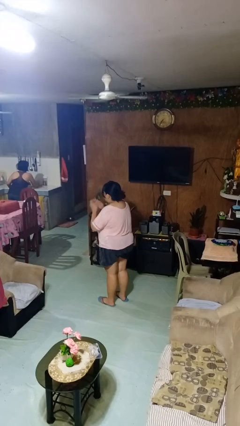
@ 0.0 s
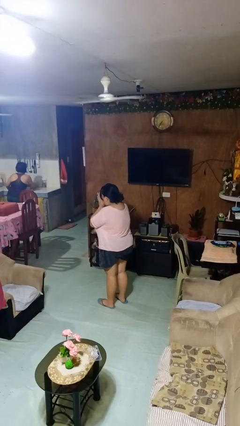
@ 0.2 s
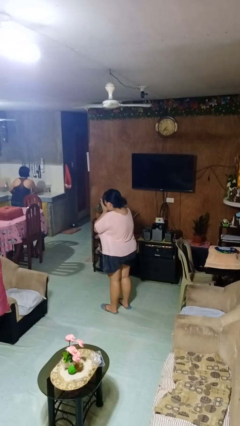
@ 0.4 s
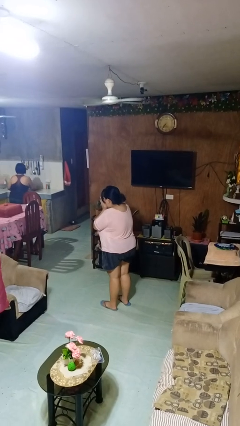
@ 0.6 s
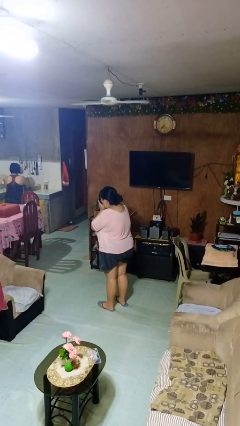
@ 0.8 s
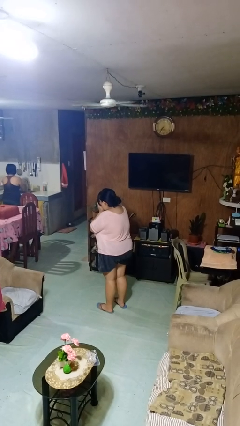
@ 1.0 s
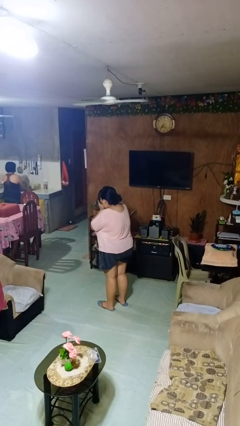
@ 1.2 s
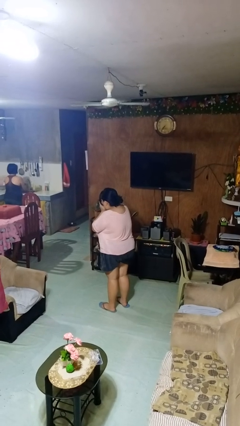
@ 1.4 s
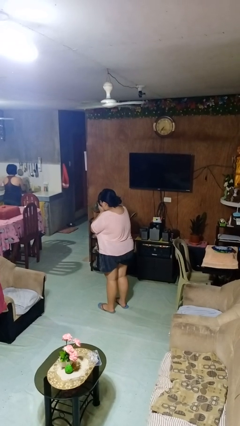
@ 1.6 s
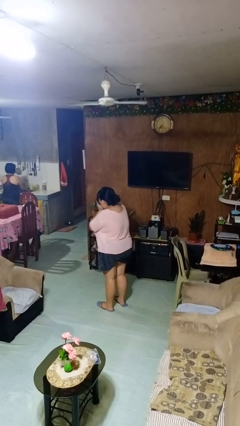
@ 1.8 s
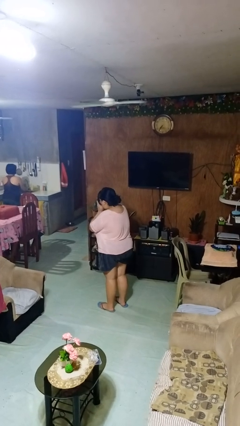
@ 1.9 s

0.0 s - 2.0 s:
person blows into hands

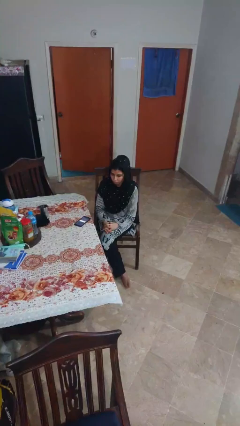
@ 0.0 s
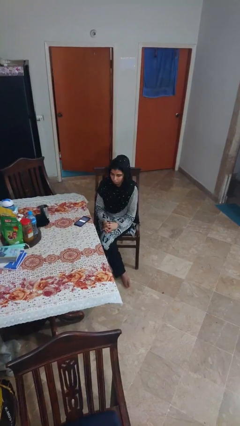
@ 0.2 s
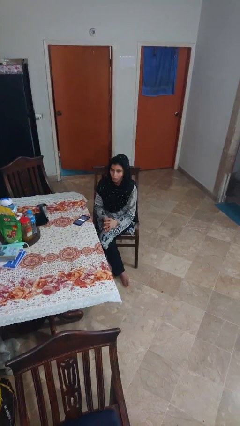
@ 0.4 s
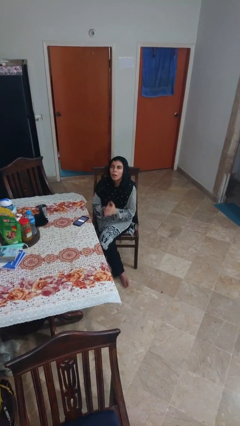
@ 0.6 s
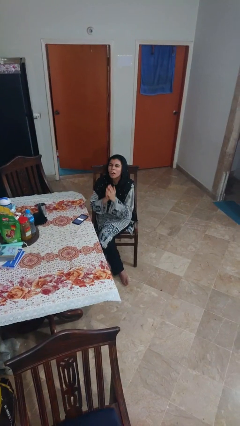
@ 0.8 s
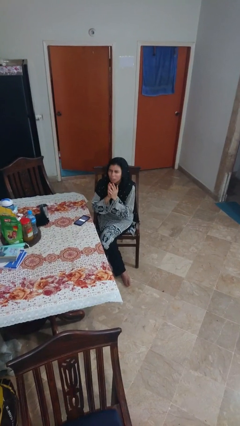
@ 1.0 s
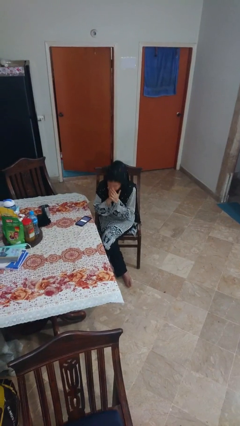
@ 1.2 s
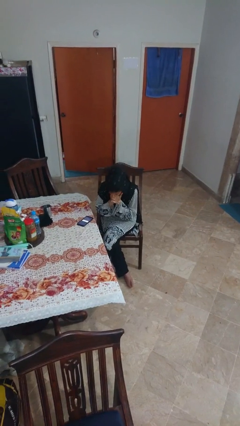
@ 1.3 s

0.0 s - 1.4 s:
person sneezes into hand

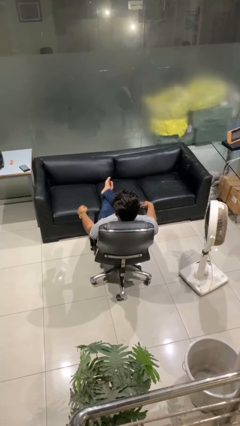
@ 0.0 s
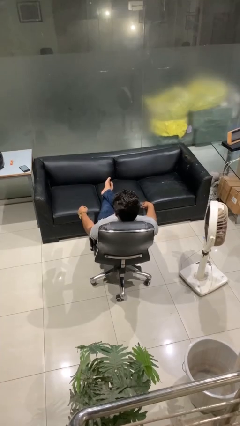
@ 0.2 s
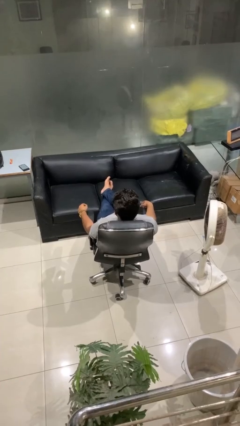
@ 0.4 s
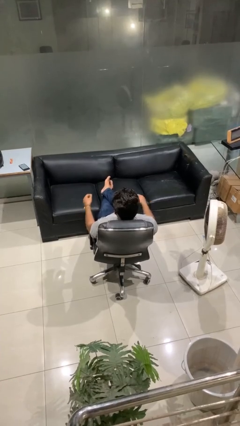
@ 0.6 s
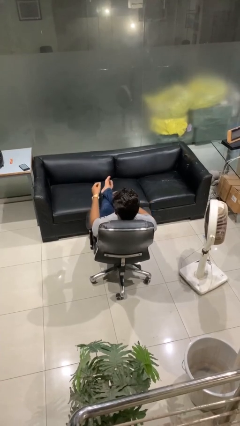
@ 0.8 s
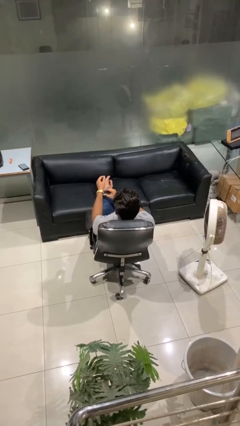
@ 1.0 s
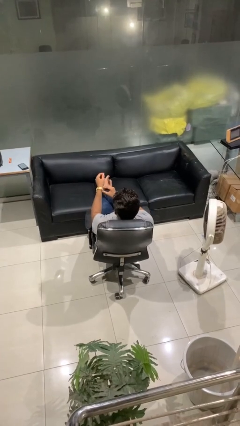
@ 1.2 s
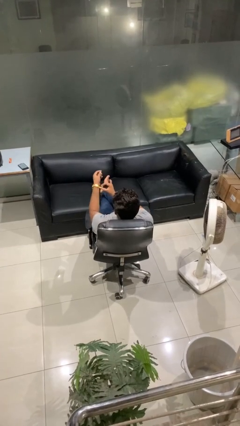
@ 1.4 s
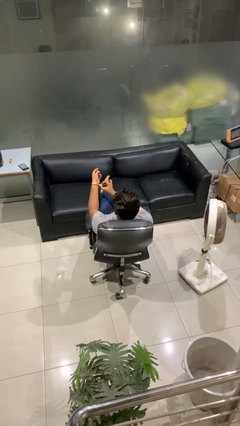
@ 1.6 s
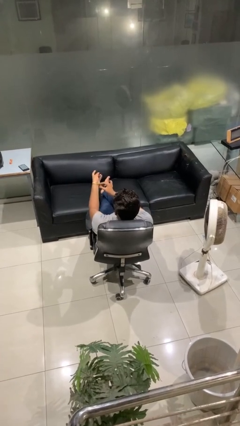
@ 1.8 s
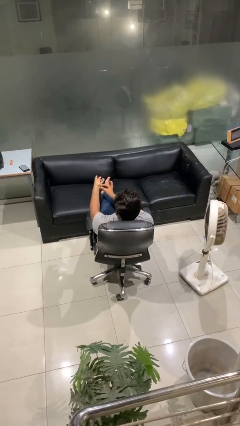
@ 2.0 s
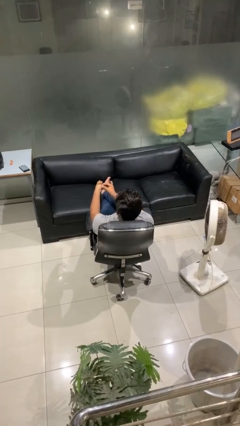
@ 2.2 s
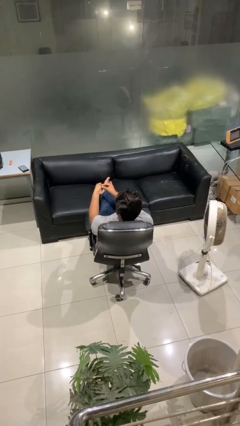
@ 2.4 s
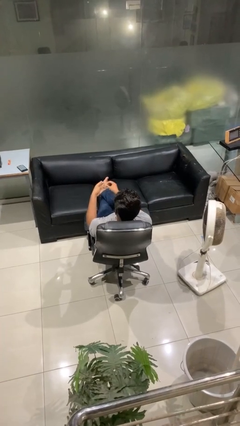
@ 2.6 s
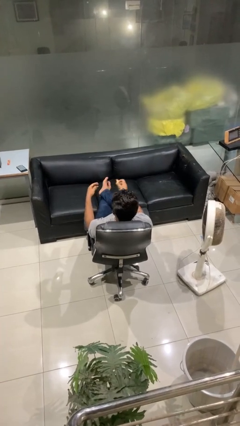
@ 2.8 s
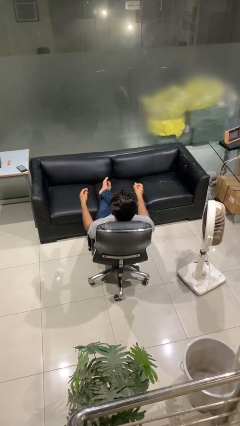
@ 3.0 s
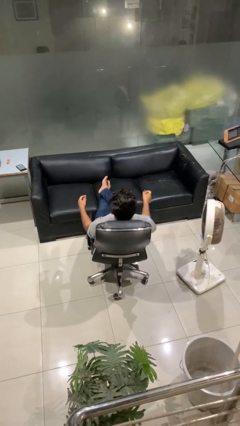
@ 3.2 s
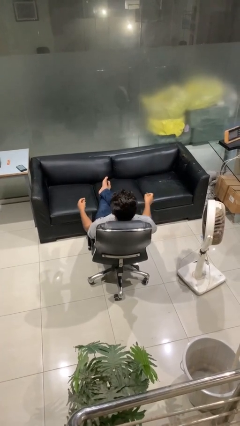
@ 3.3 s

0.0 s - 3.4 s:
person takes off wristwatch

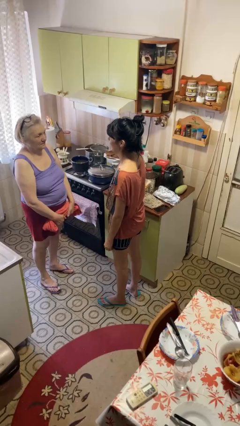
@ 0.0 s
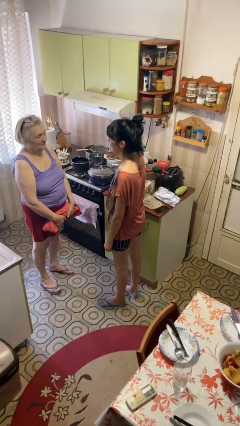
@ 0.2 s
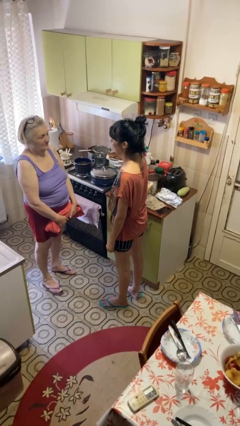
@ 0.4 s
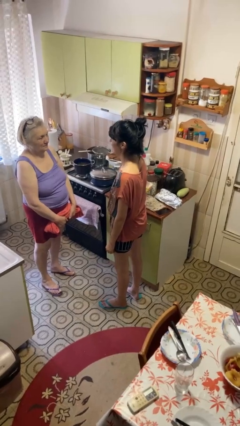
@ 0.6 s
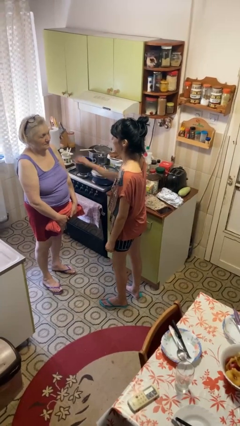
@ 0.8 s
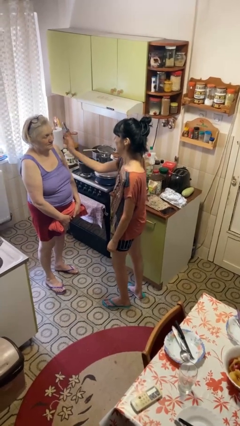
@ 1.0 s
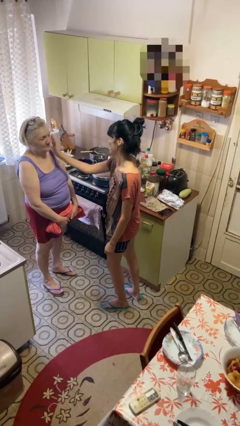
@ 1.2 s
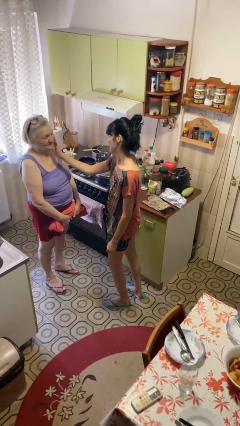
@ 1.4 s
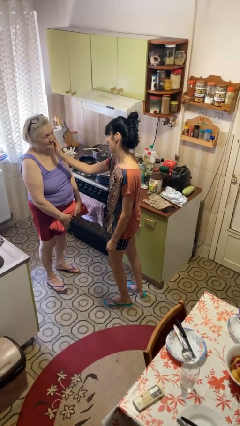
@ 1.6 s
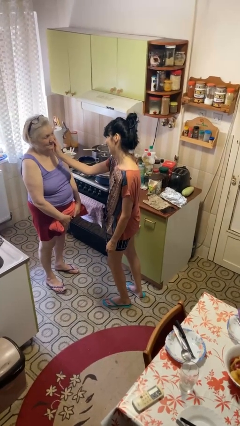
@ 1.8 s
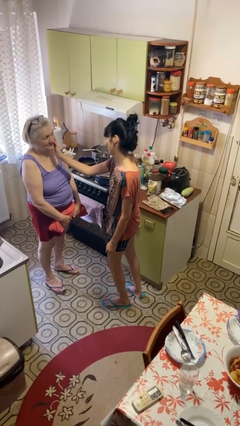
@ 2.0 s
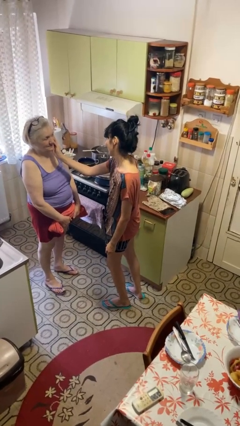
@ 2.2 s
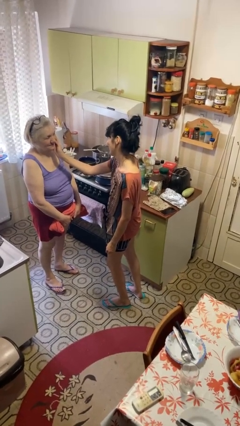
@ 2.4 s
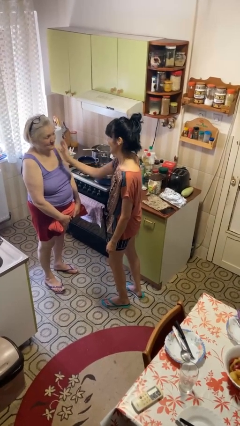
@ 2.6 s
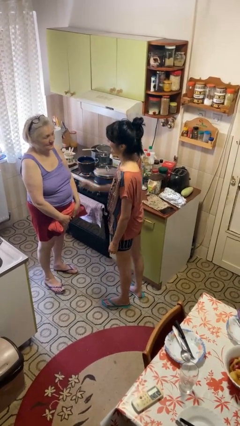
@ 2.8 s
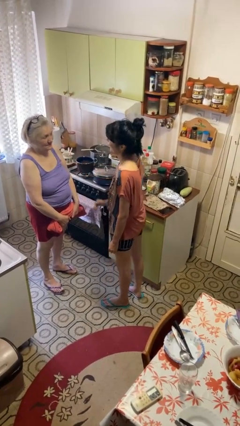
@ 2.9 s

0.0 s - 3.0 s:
person touches face of person

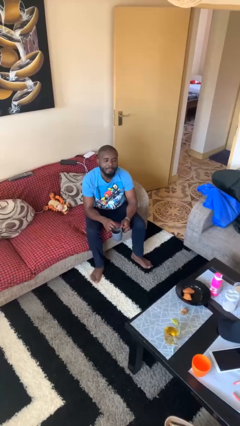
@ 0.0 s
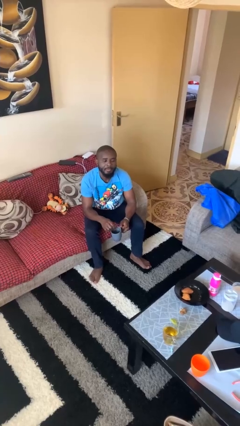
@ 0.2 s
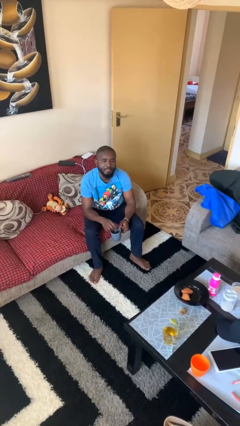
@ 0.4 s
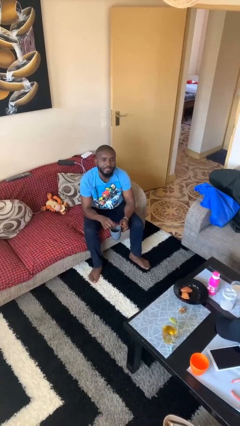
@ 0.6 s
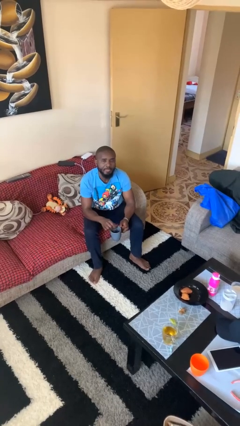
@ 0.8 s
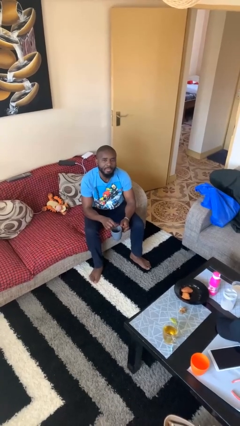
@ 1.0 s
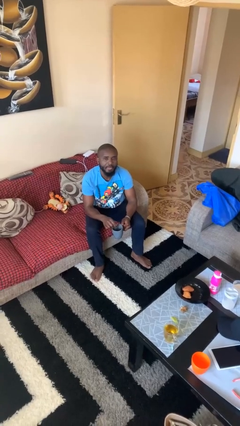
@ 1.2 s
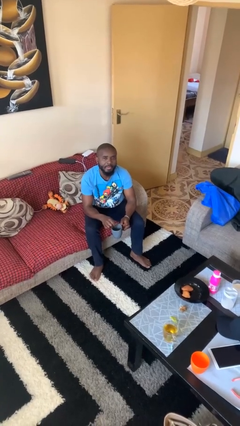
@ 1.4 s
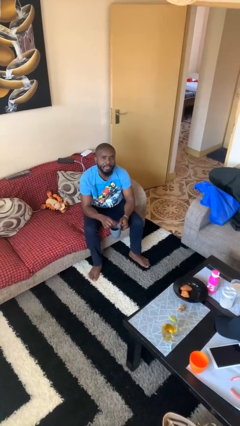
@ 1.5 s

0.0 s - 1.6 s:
person stirs mug

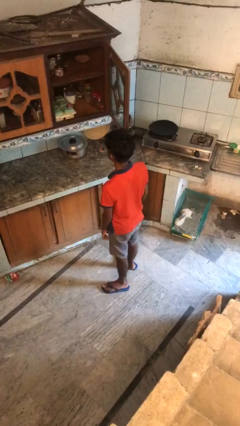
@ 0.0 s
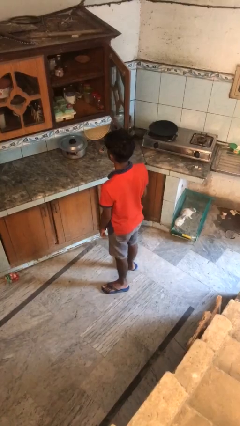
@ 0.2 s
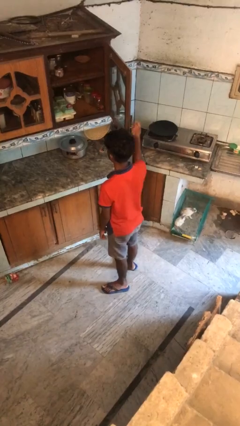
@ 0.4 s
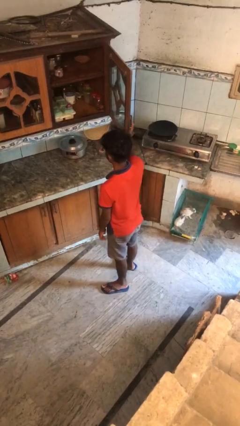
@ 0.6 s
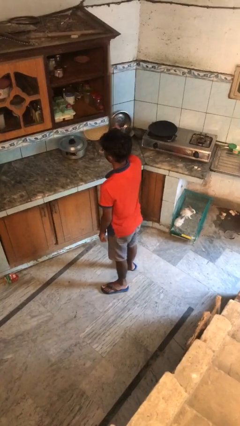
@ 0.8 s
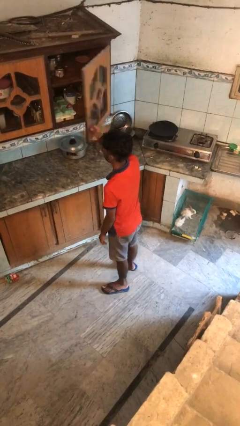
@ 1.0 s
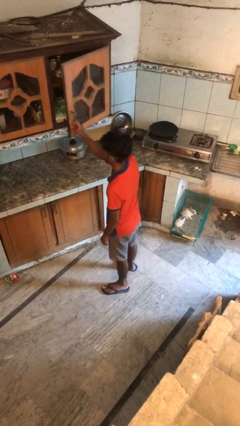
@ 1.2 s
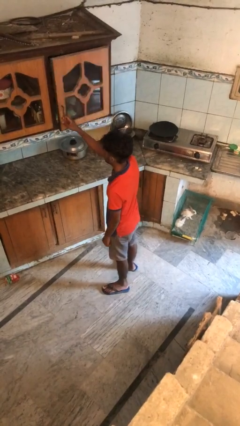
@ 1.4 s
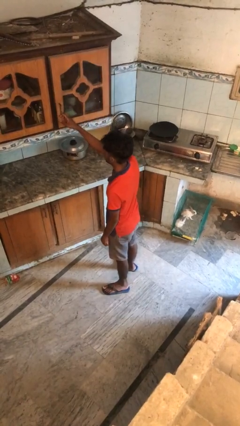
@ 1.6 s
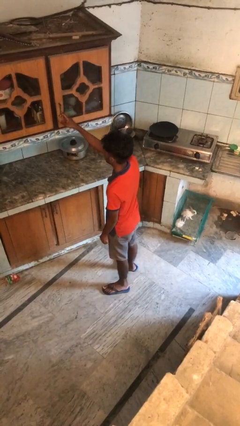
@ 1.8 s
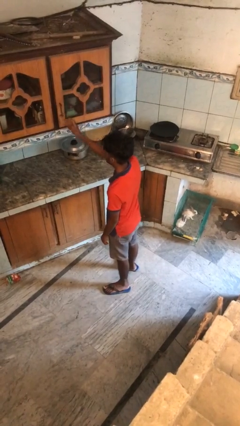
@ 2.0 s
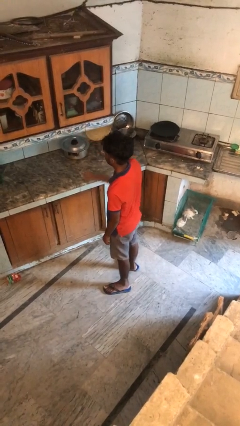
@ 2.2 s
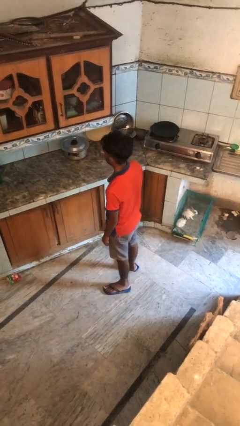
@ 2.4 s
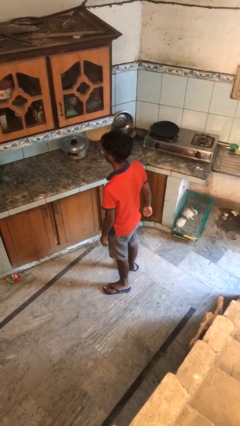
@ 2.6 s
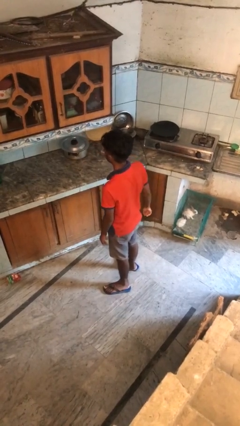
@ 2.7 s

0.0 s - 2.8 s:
person closes cabinet

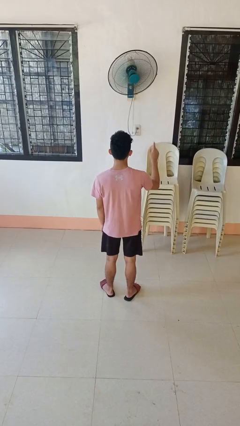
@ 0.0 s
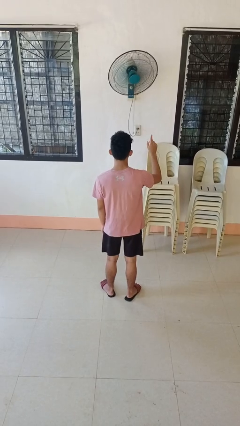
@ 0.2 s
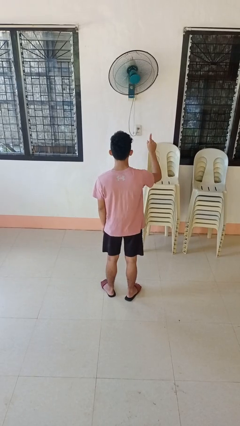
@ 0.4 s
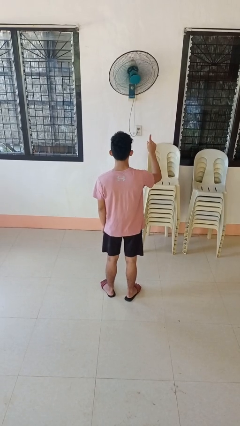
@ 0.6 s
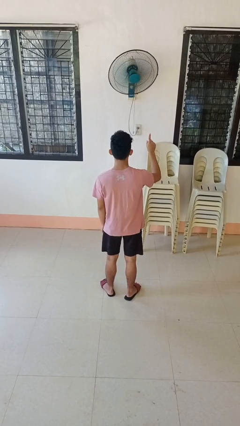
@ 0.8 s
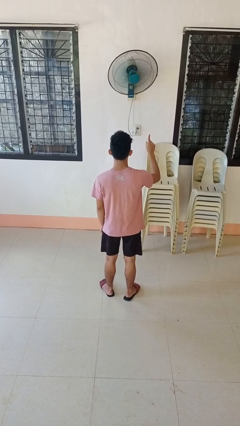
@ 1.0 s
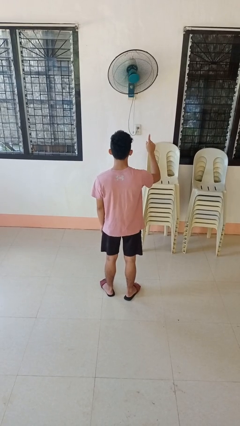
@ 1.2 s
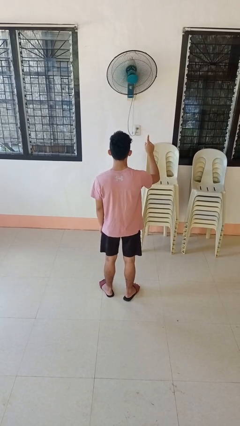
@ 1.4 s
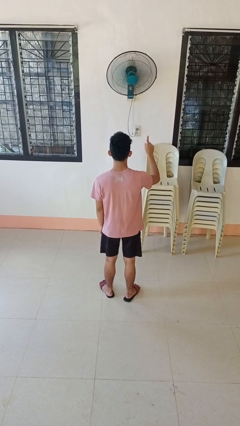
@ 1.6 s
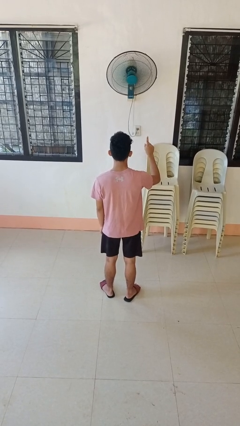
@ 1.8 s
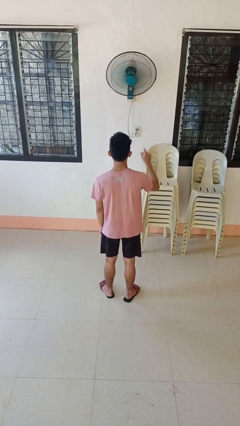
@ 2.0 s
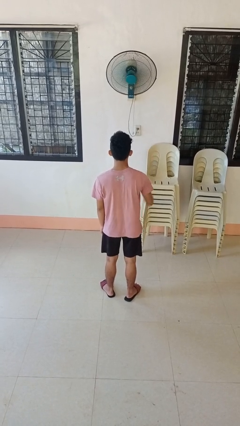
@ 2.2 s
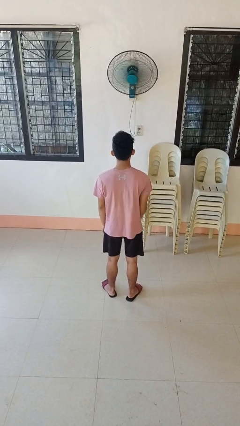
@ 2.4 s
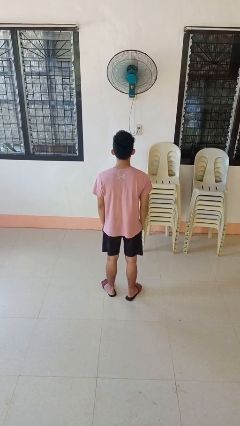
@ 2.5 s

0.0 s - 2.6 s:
person gestures number one

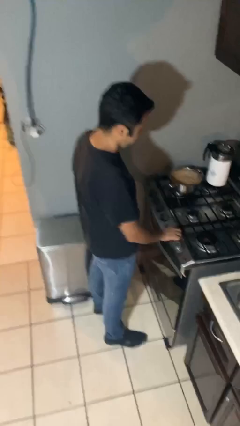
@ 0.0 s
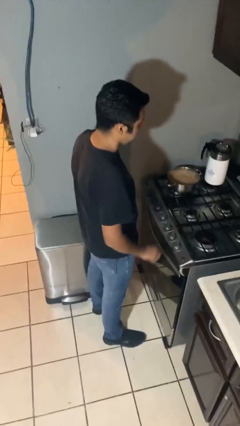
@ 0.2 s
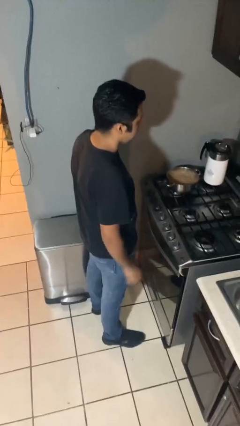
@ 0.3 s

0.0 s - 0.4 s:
person turns off stovetop
